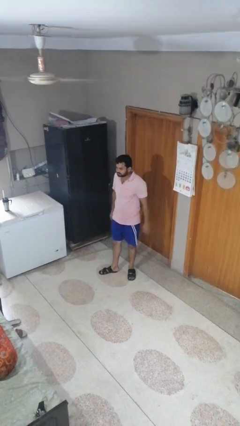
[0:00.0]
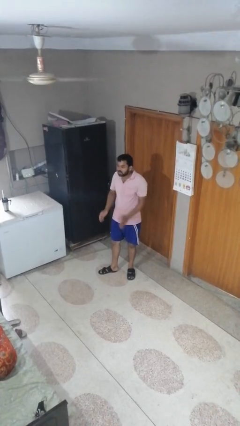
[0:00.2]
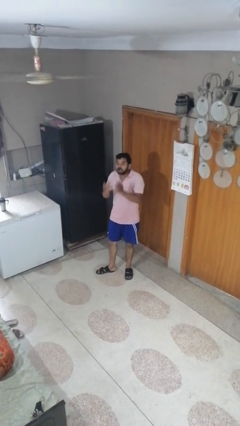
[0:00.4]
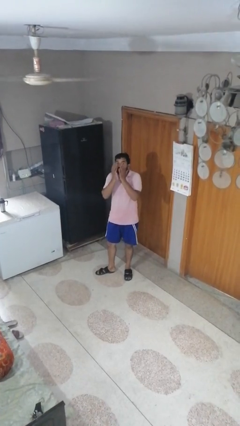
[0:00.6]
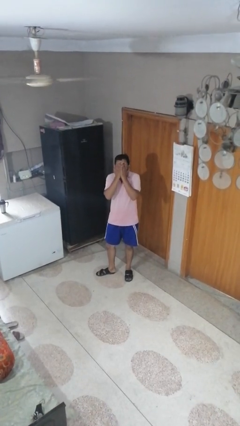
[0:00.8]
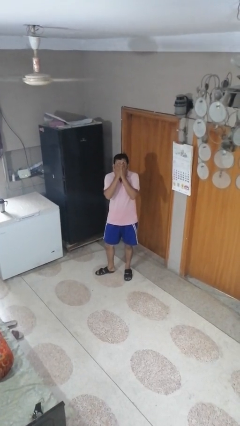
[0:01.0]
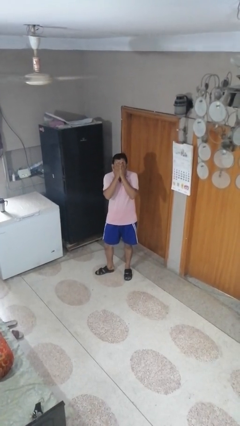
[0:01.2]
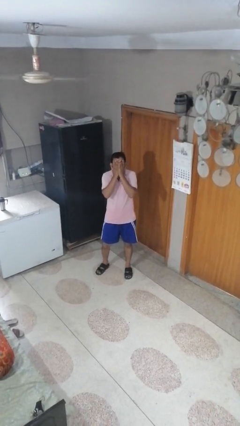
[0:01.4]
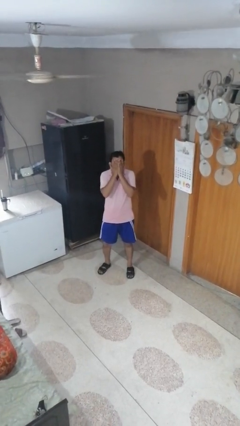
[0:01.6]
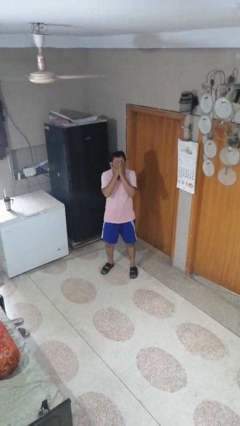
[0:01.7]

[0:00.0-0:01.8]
person covers face with hands

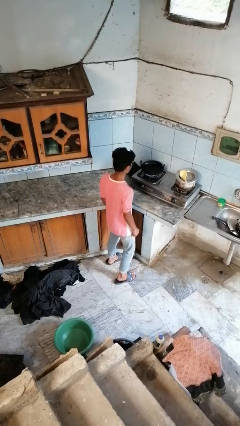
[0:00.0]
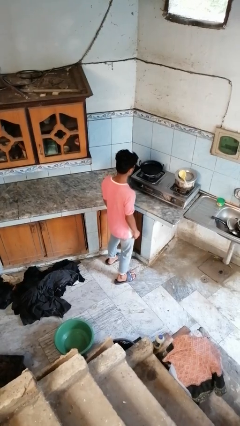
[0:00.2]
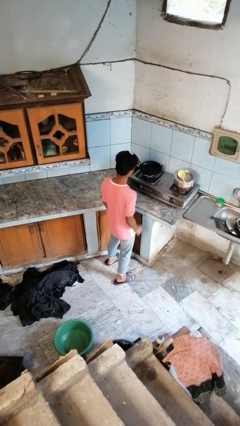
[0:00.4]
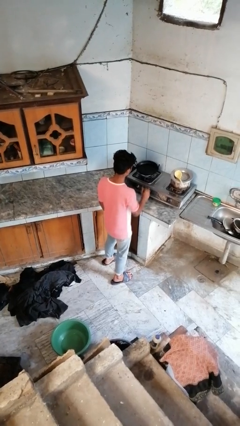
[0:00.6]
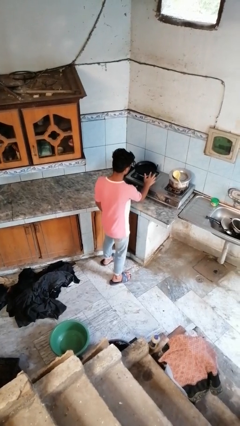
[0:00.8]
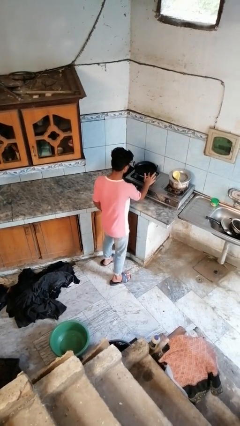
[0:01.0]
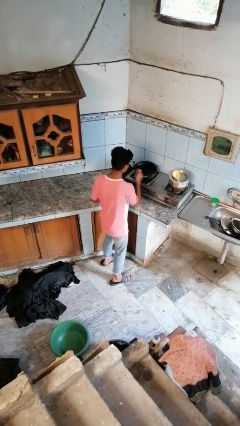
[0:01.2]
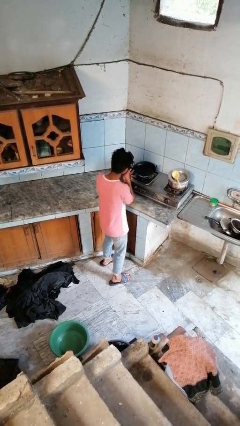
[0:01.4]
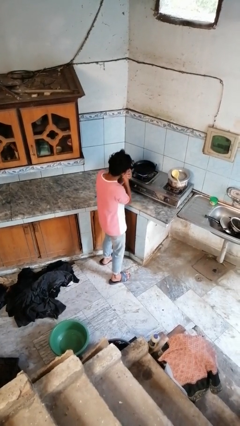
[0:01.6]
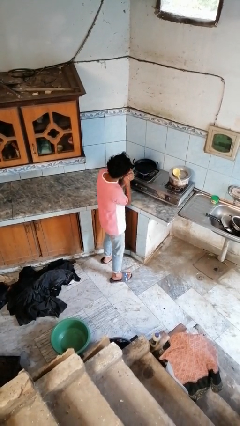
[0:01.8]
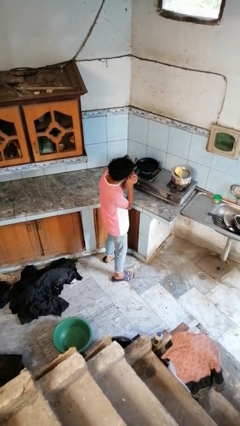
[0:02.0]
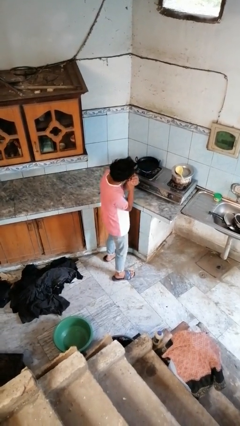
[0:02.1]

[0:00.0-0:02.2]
person burns hand

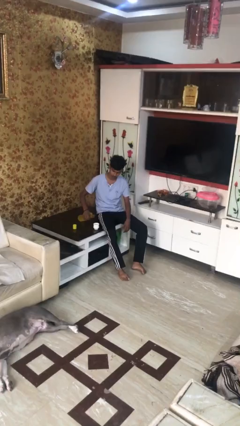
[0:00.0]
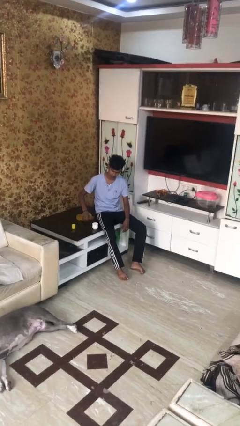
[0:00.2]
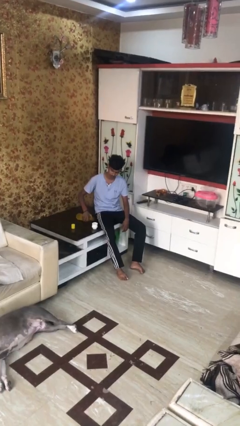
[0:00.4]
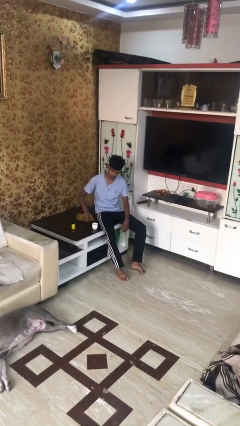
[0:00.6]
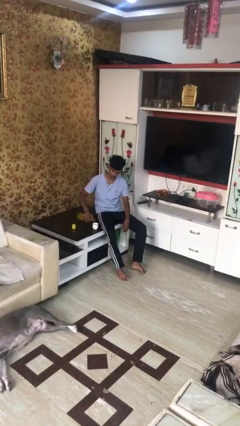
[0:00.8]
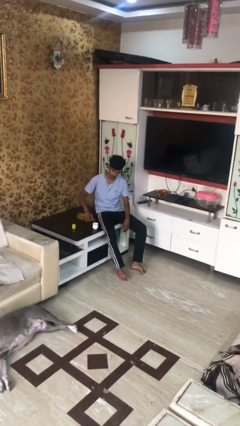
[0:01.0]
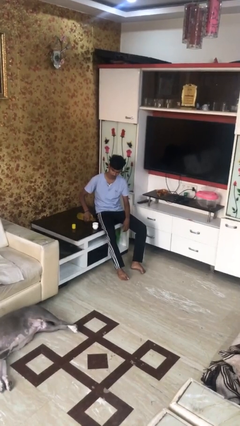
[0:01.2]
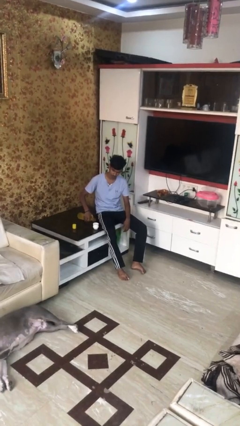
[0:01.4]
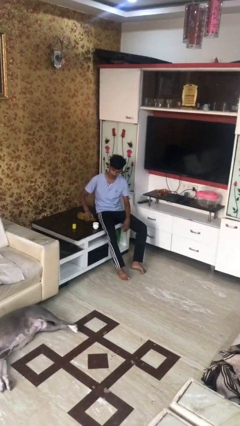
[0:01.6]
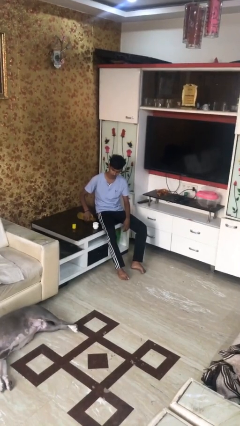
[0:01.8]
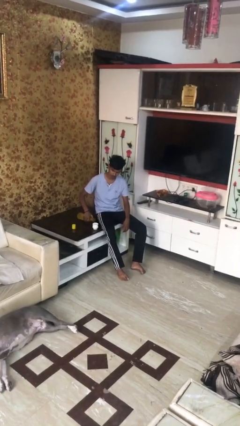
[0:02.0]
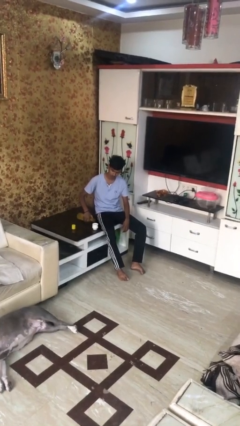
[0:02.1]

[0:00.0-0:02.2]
person pours liquid into cup

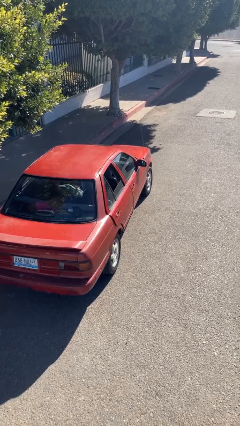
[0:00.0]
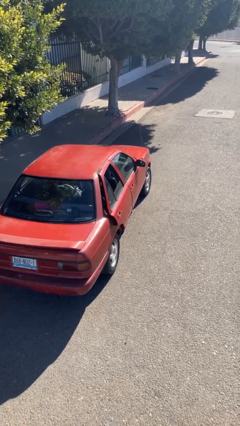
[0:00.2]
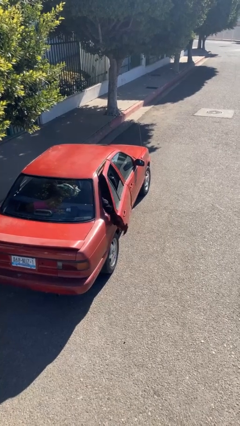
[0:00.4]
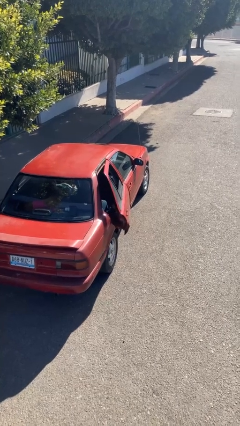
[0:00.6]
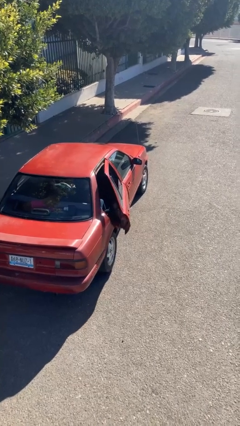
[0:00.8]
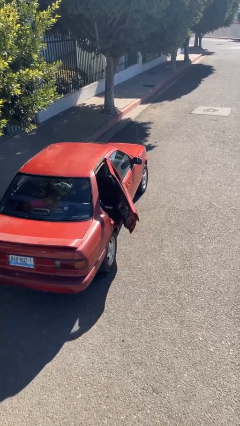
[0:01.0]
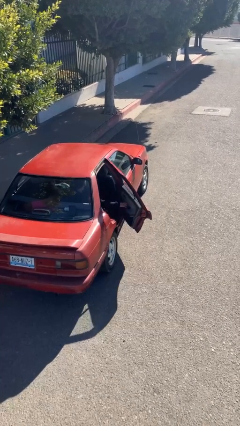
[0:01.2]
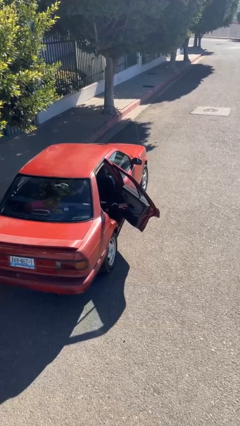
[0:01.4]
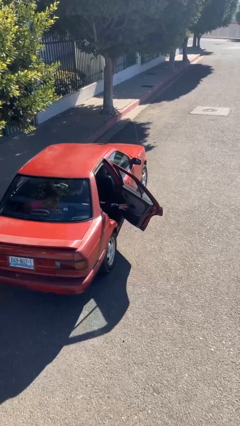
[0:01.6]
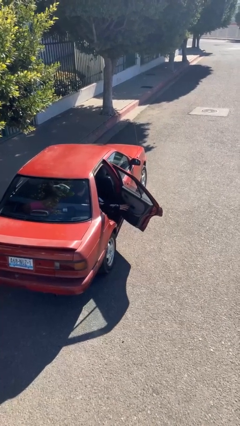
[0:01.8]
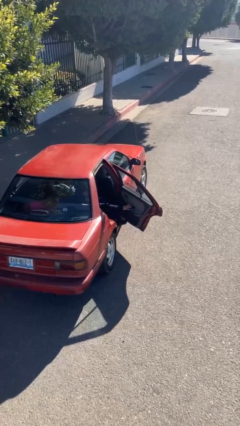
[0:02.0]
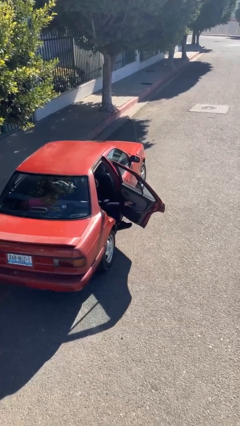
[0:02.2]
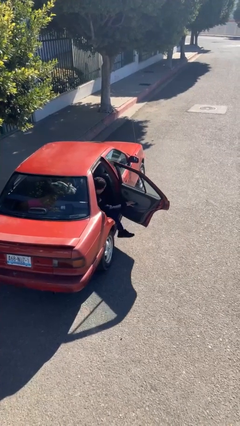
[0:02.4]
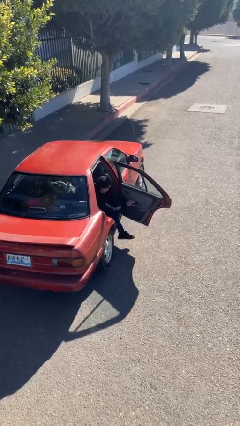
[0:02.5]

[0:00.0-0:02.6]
person opens car door

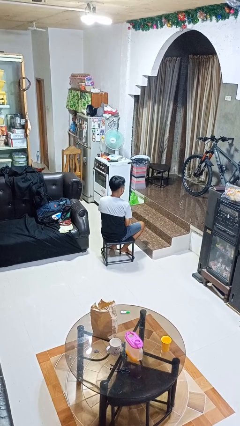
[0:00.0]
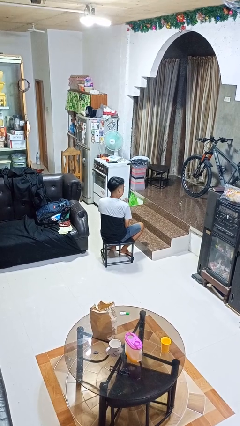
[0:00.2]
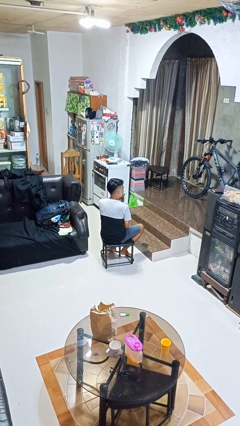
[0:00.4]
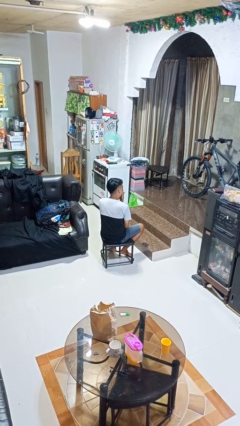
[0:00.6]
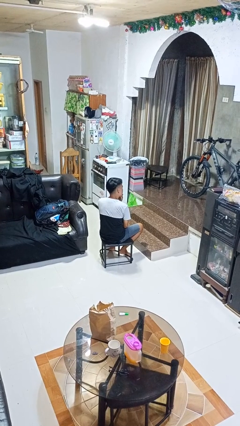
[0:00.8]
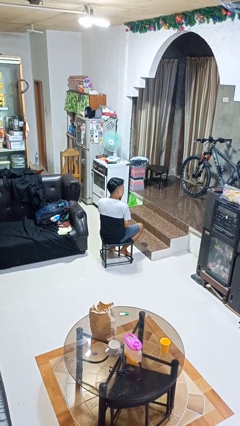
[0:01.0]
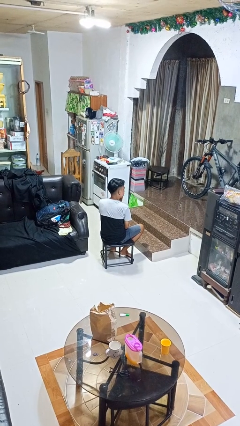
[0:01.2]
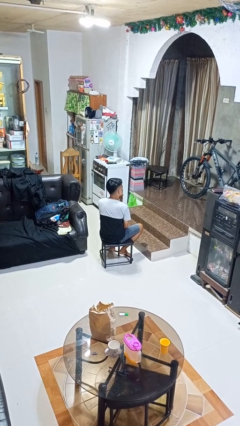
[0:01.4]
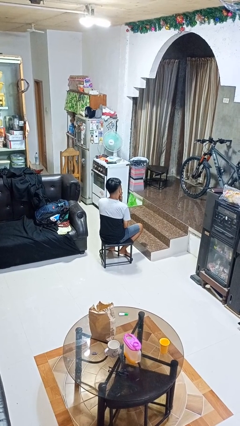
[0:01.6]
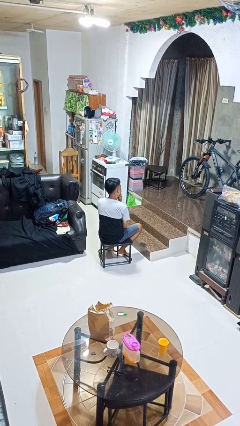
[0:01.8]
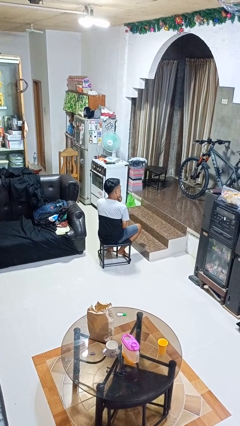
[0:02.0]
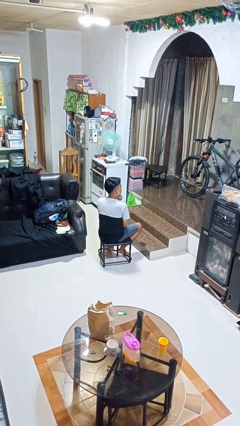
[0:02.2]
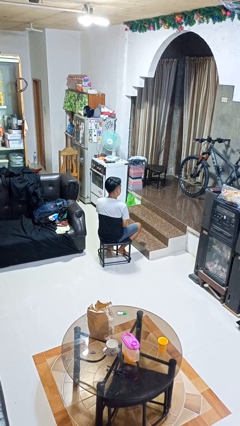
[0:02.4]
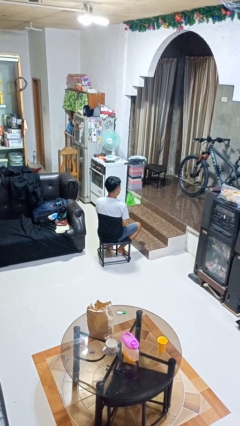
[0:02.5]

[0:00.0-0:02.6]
person strokes chin

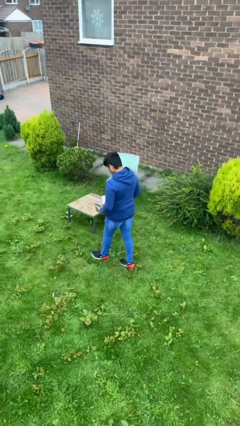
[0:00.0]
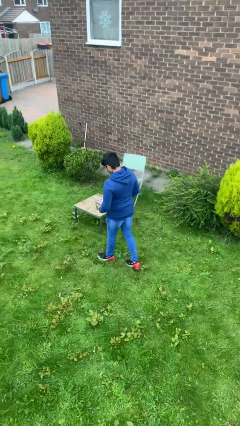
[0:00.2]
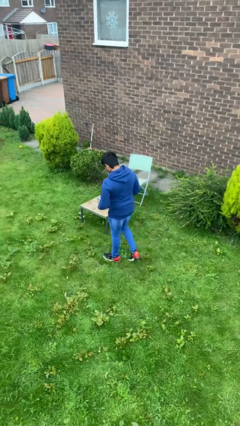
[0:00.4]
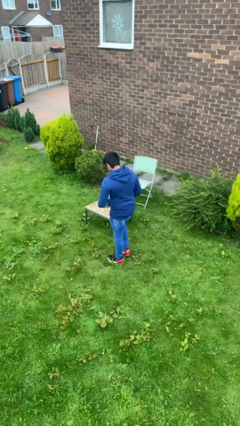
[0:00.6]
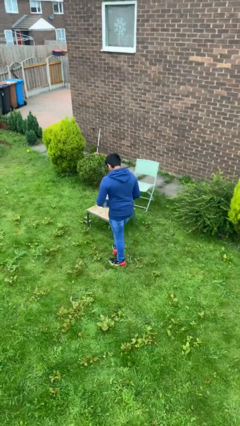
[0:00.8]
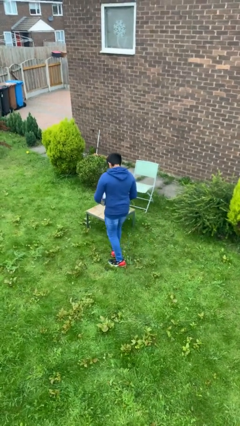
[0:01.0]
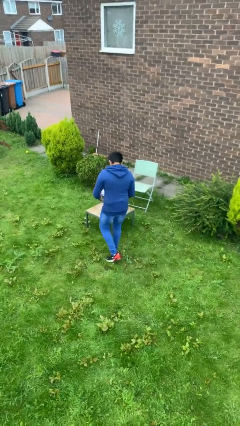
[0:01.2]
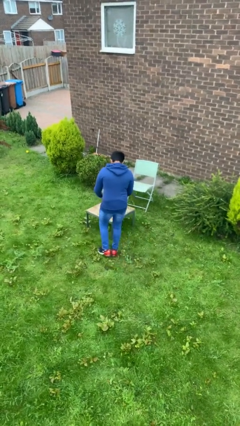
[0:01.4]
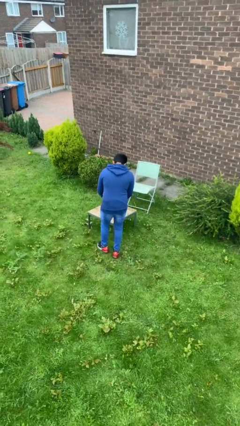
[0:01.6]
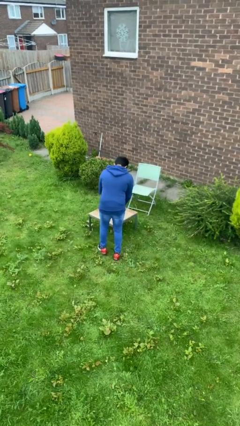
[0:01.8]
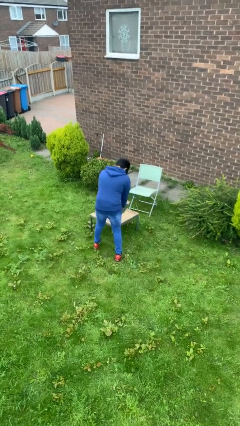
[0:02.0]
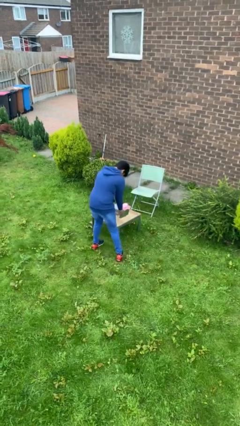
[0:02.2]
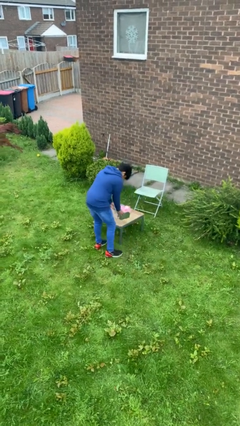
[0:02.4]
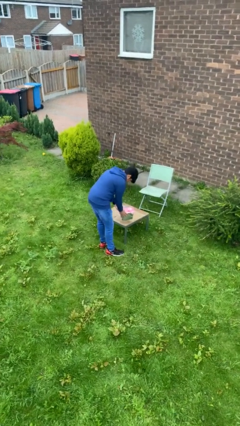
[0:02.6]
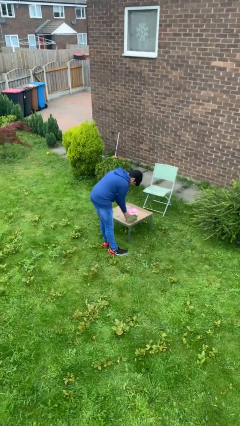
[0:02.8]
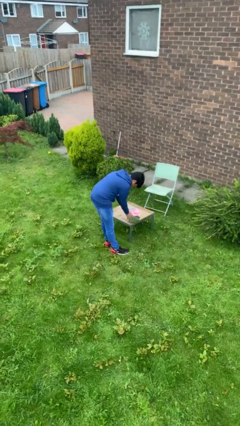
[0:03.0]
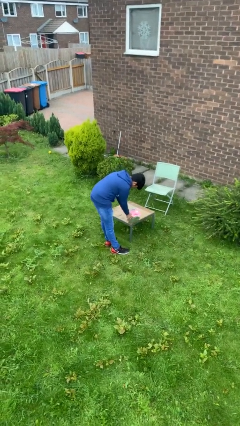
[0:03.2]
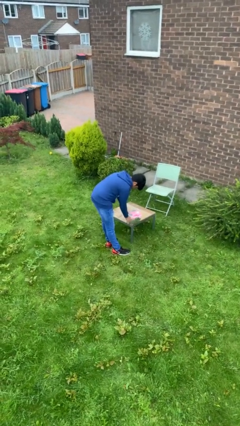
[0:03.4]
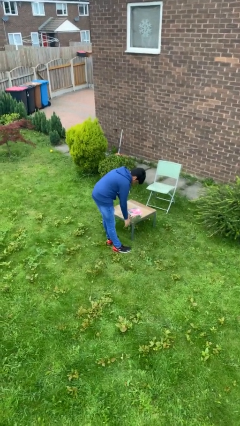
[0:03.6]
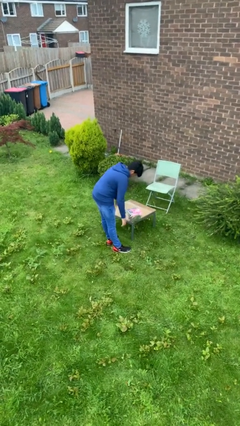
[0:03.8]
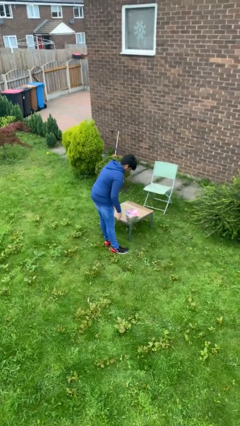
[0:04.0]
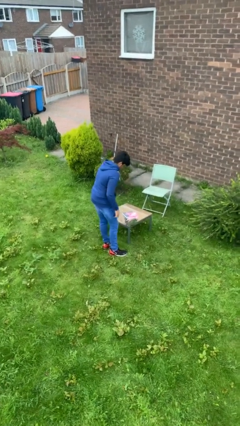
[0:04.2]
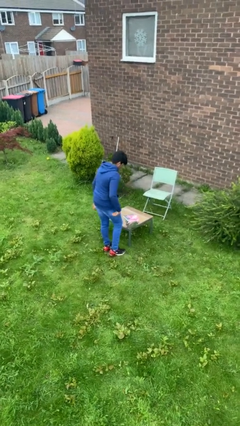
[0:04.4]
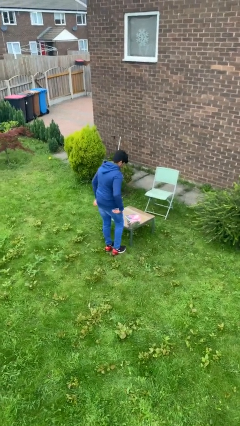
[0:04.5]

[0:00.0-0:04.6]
person puts down object on table

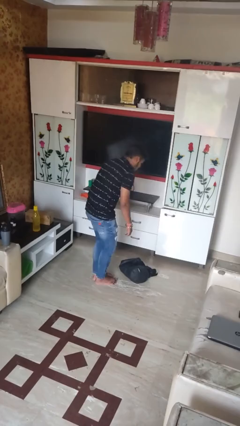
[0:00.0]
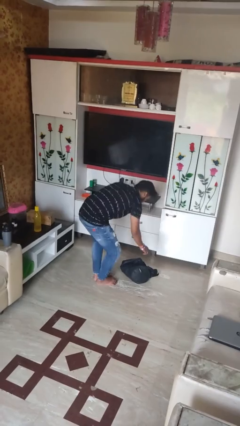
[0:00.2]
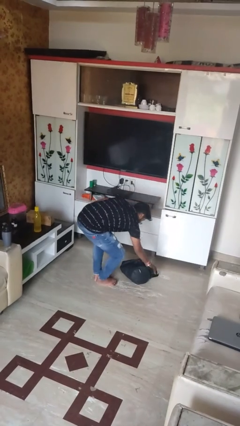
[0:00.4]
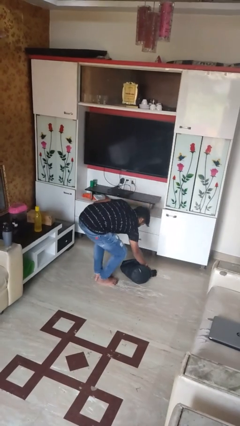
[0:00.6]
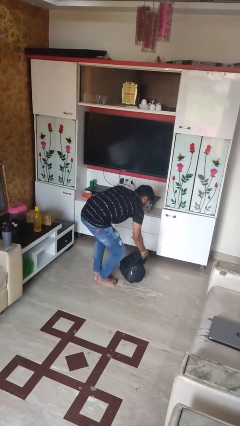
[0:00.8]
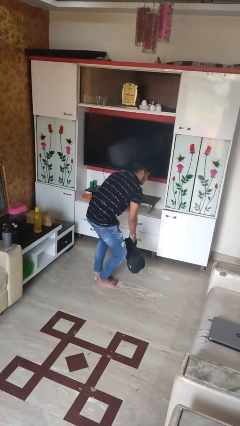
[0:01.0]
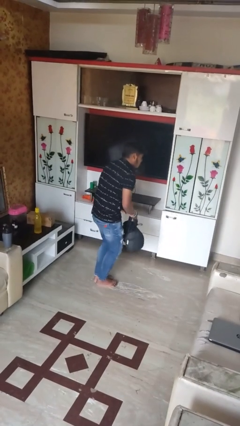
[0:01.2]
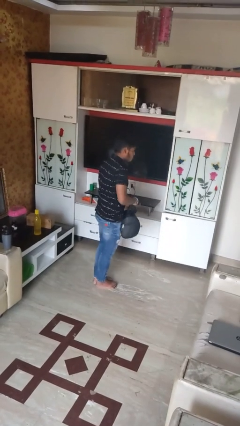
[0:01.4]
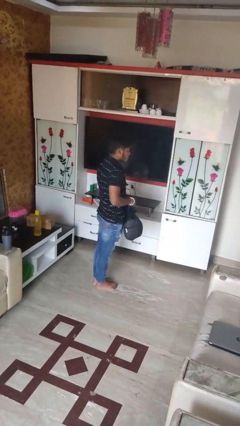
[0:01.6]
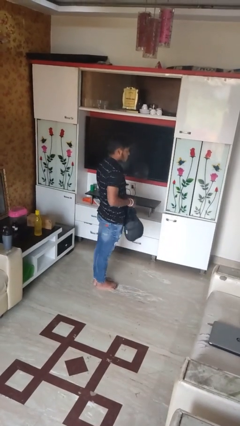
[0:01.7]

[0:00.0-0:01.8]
person picks up object from floor
